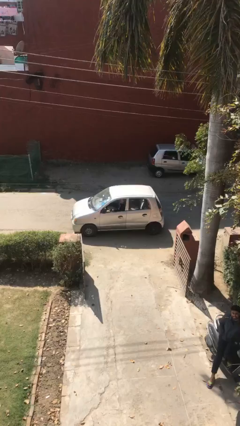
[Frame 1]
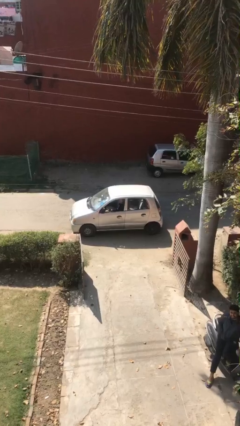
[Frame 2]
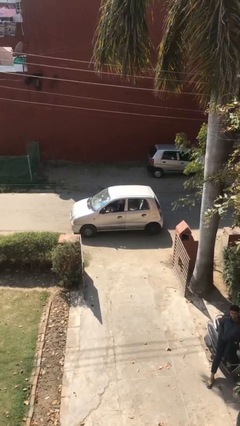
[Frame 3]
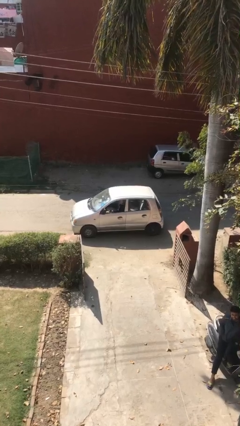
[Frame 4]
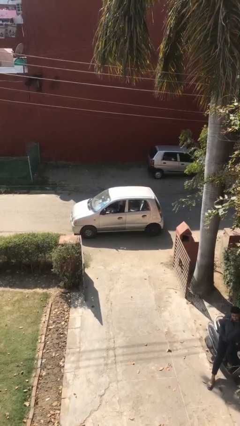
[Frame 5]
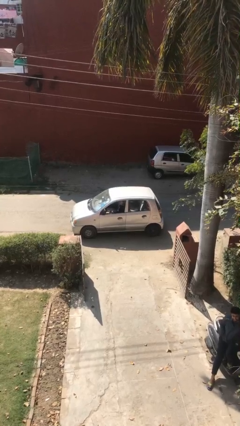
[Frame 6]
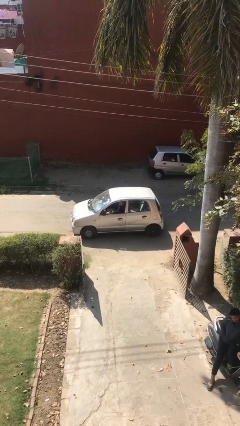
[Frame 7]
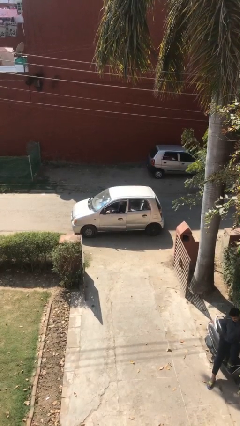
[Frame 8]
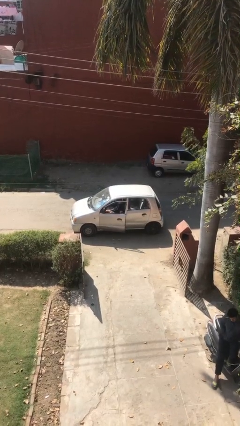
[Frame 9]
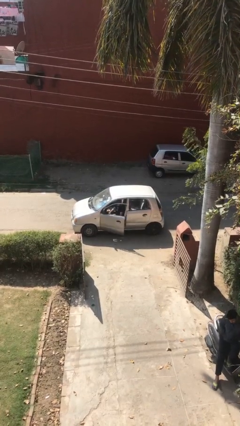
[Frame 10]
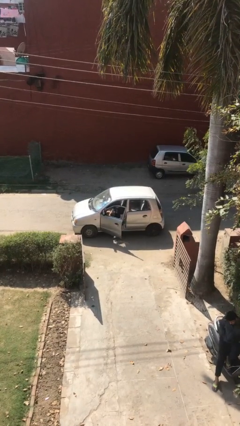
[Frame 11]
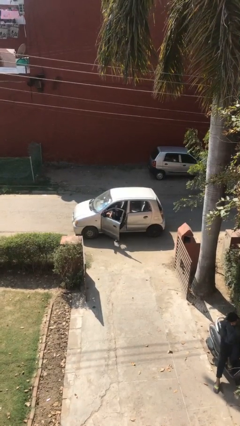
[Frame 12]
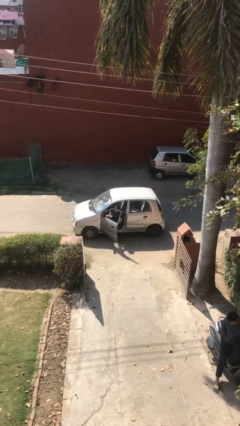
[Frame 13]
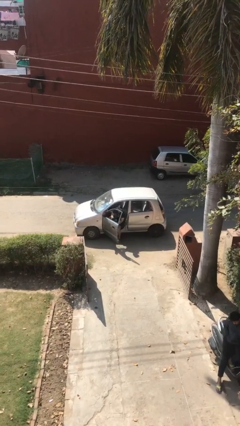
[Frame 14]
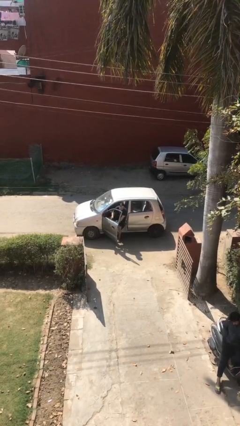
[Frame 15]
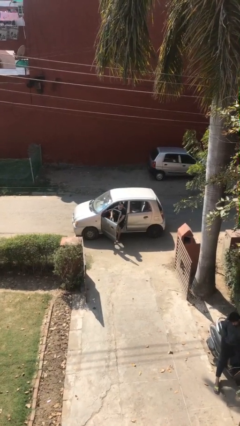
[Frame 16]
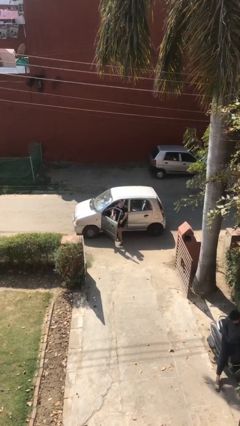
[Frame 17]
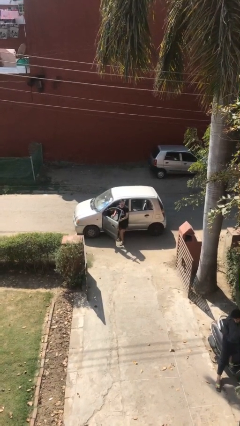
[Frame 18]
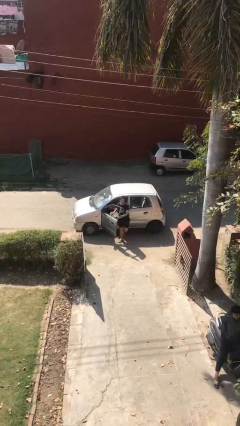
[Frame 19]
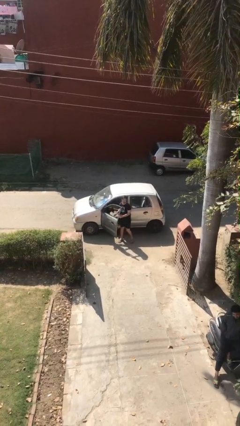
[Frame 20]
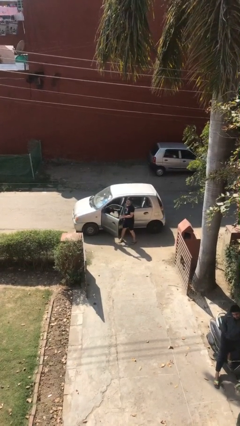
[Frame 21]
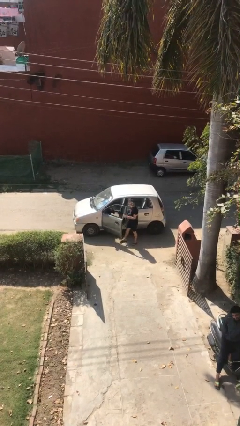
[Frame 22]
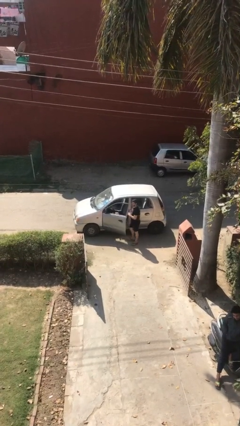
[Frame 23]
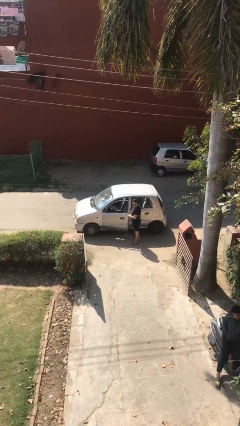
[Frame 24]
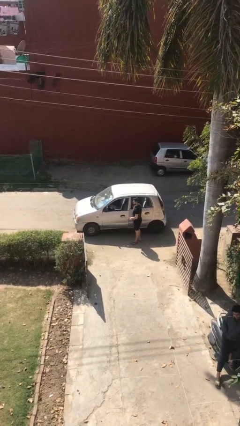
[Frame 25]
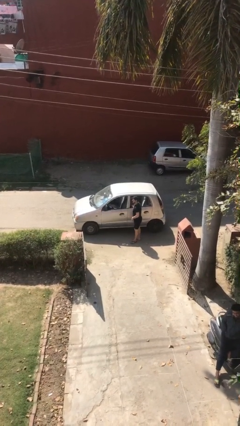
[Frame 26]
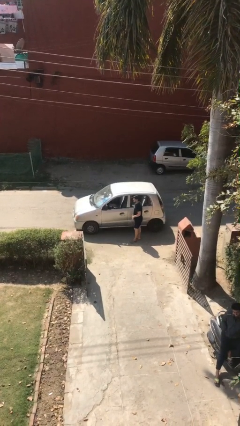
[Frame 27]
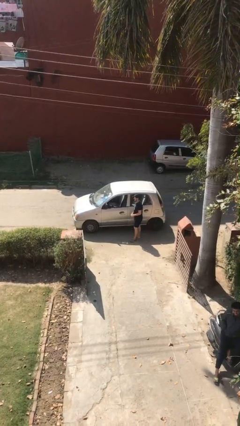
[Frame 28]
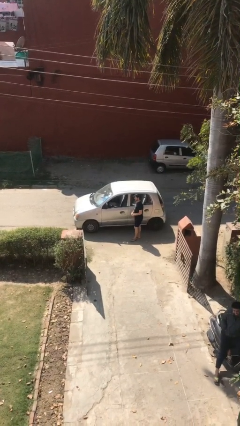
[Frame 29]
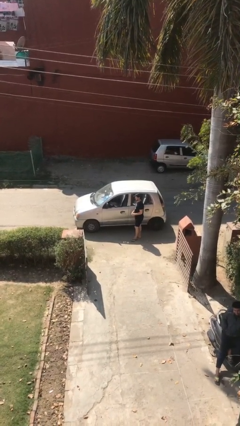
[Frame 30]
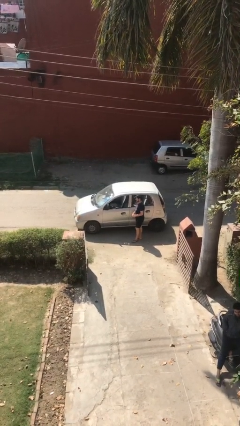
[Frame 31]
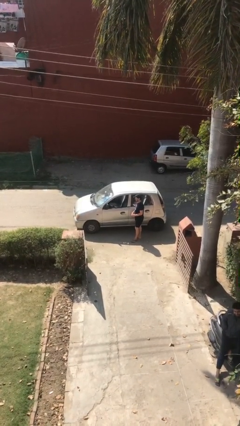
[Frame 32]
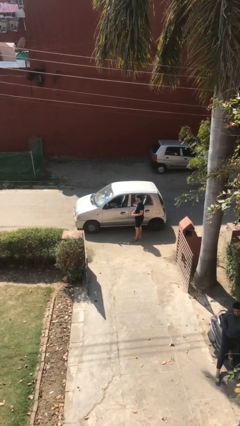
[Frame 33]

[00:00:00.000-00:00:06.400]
car drops off person

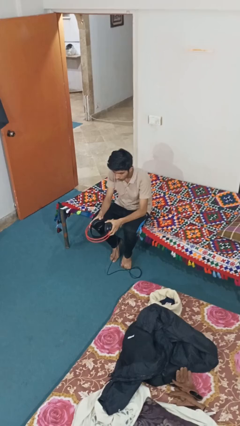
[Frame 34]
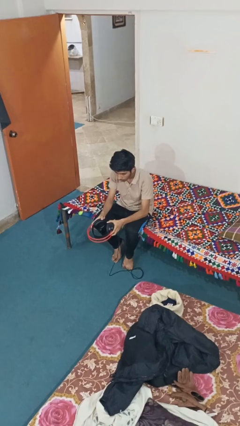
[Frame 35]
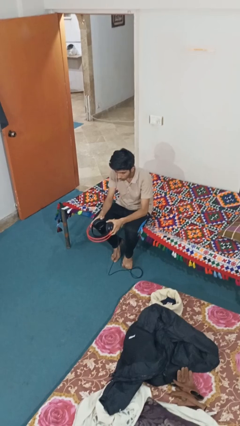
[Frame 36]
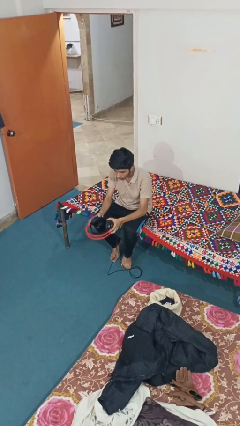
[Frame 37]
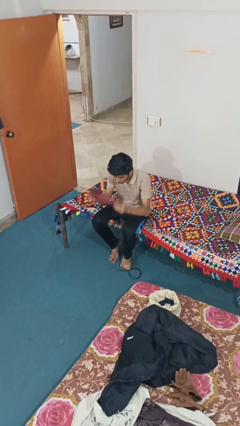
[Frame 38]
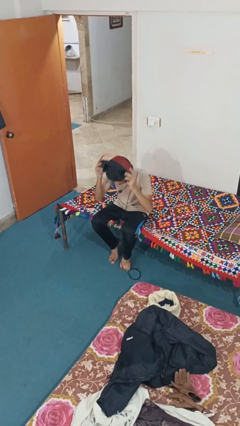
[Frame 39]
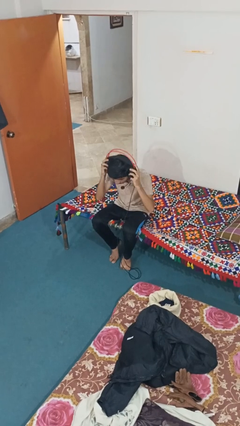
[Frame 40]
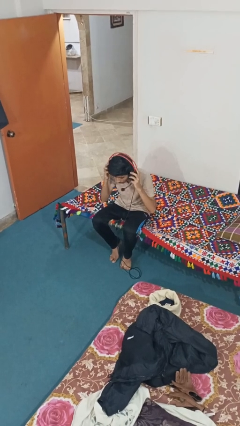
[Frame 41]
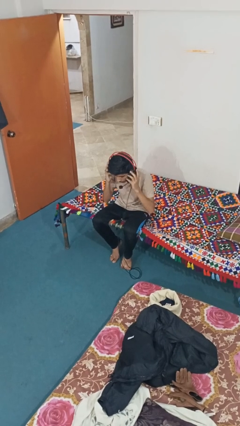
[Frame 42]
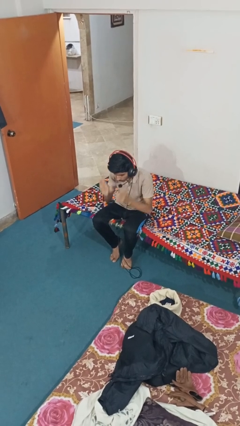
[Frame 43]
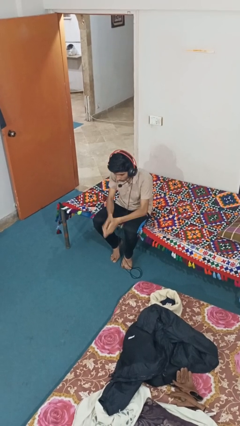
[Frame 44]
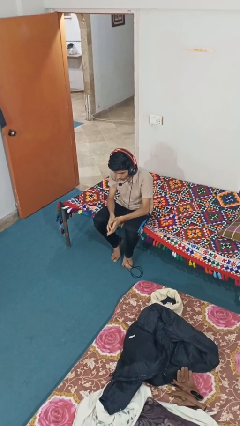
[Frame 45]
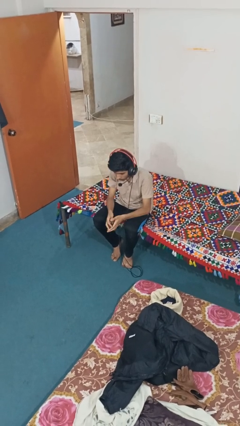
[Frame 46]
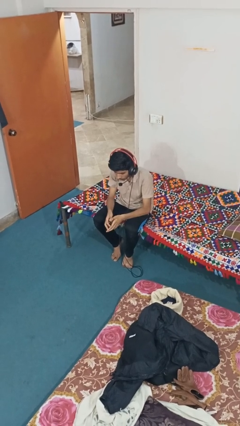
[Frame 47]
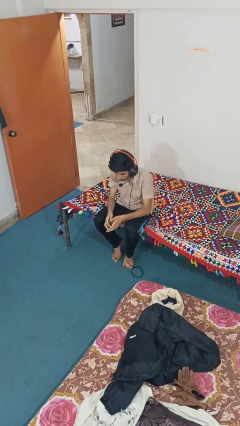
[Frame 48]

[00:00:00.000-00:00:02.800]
person puts on headphones

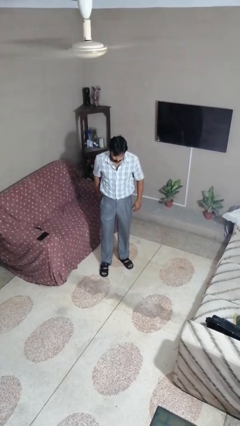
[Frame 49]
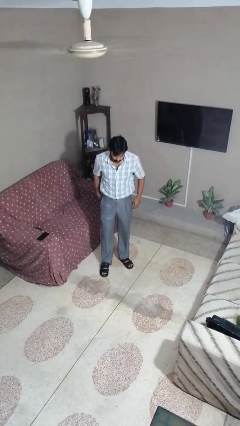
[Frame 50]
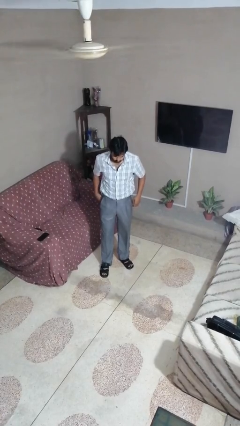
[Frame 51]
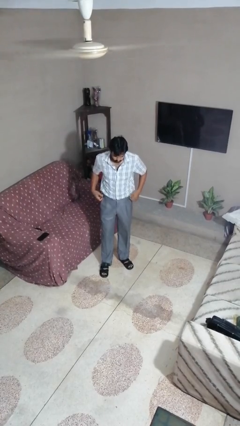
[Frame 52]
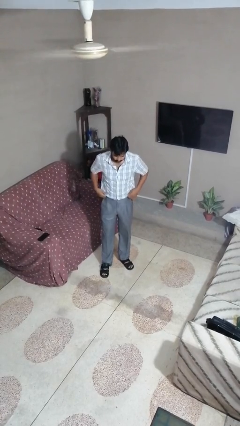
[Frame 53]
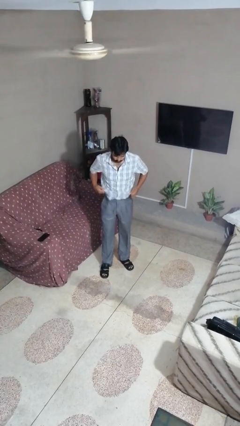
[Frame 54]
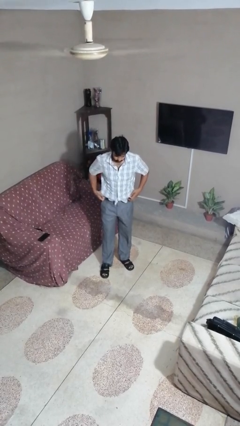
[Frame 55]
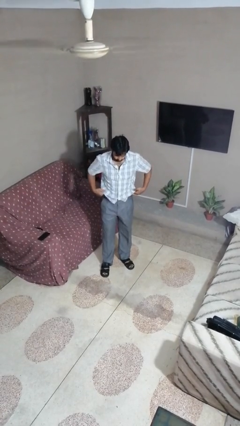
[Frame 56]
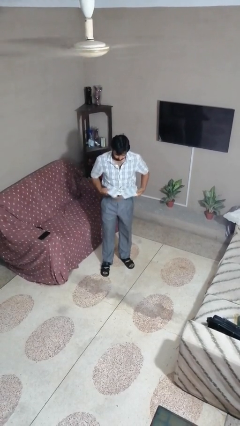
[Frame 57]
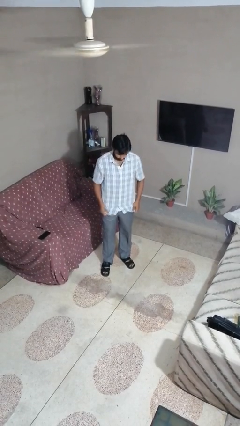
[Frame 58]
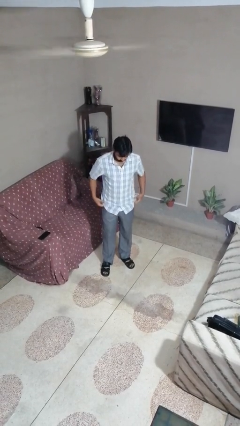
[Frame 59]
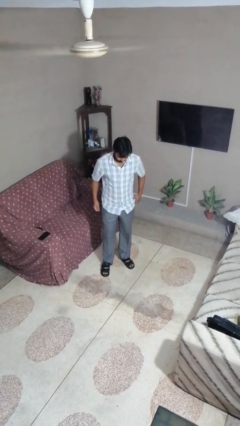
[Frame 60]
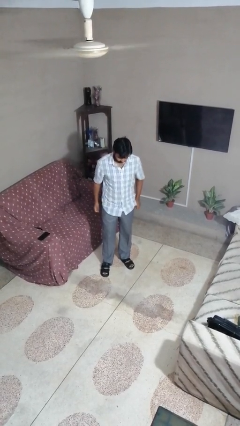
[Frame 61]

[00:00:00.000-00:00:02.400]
person untucks shirt

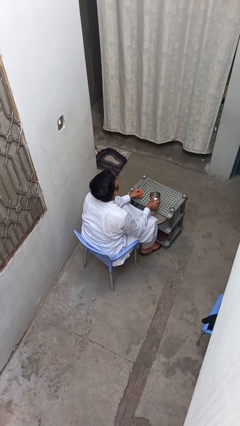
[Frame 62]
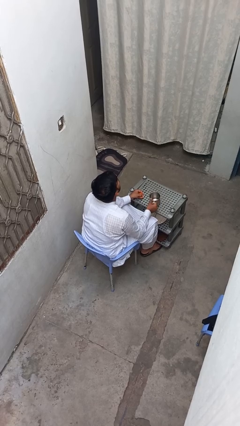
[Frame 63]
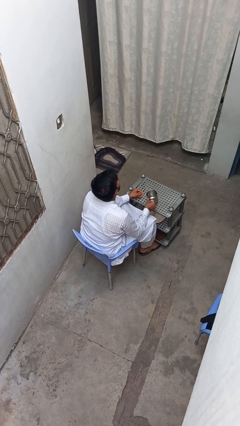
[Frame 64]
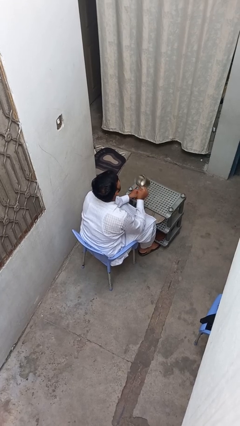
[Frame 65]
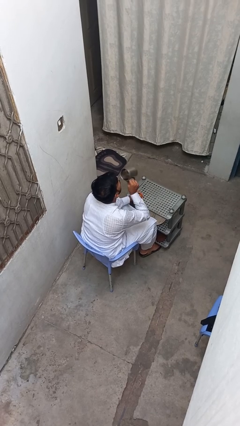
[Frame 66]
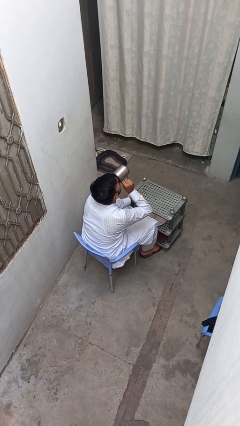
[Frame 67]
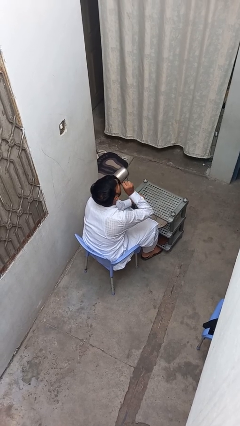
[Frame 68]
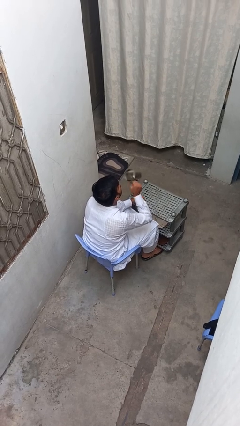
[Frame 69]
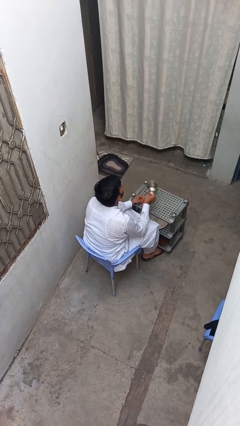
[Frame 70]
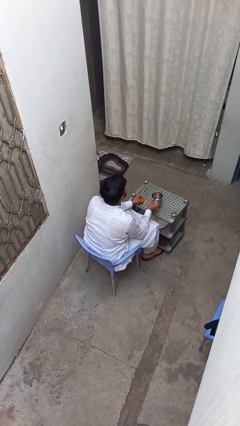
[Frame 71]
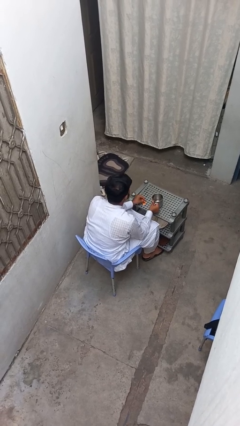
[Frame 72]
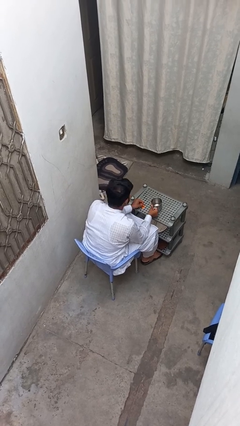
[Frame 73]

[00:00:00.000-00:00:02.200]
person drinks from cup

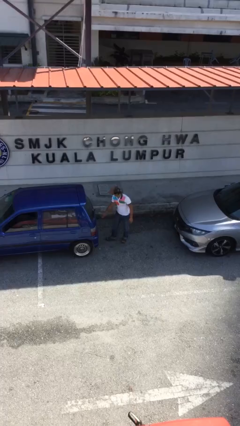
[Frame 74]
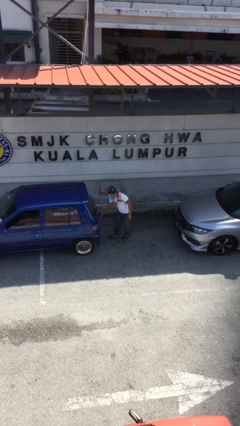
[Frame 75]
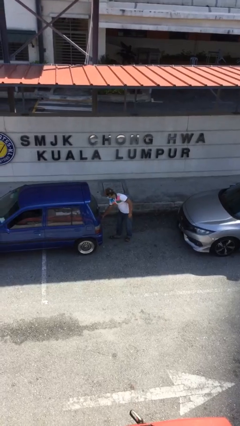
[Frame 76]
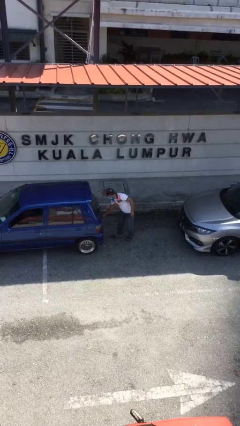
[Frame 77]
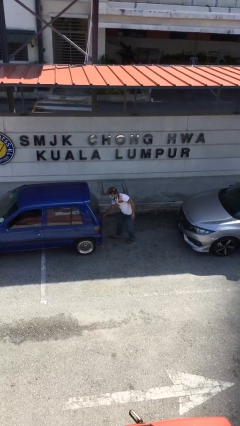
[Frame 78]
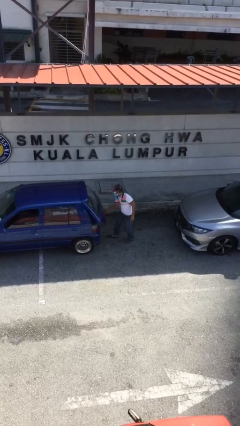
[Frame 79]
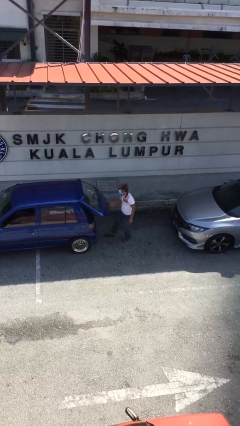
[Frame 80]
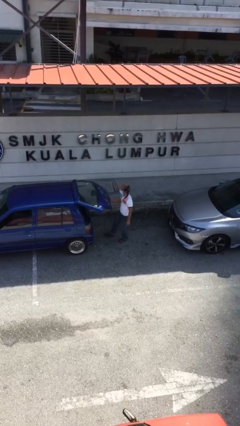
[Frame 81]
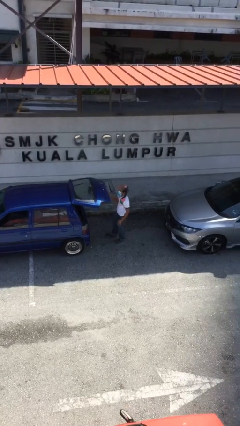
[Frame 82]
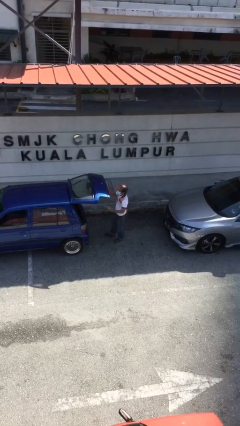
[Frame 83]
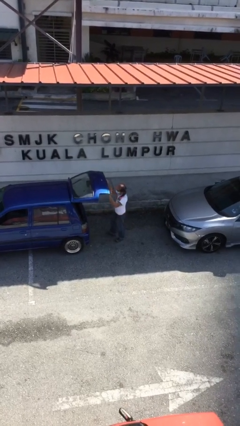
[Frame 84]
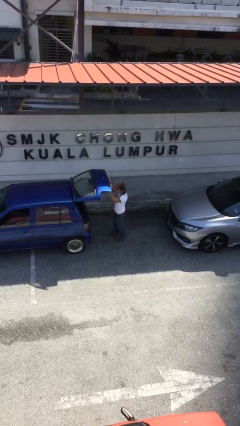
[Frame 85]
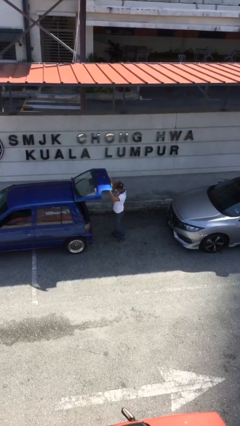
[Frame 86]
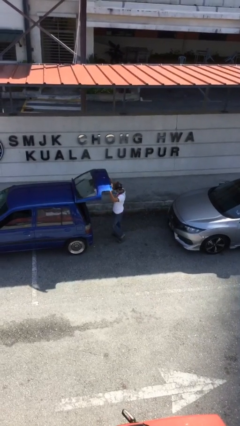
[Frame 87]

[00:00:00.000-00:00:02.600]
person opens car trunk

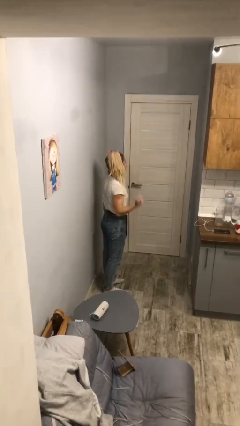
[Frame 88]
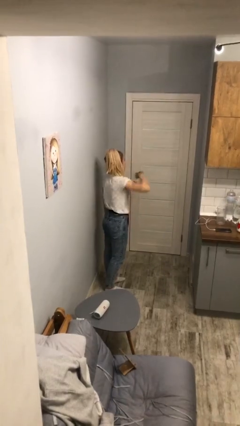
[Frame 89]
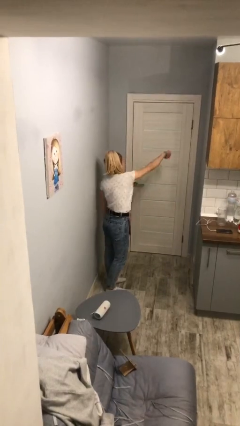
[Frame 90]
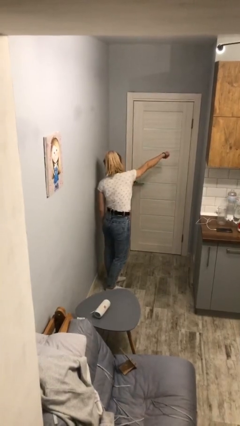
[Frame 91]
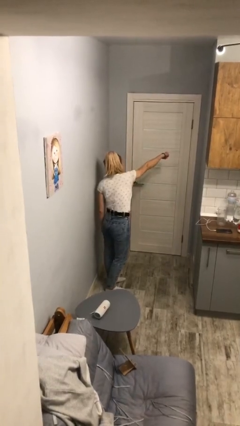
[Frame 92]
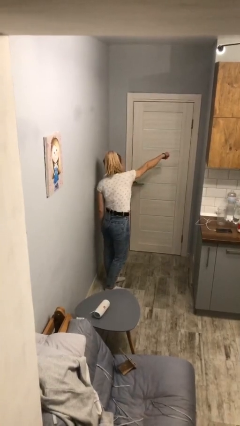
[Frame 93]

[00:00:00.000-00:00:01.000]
person punches
